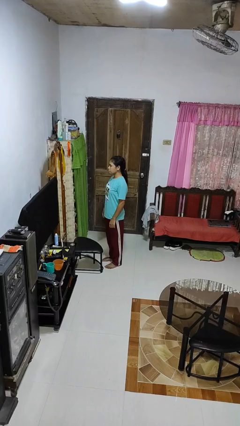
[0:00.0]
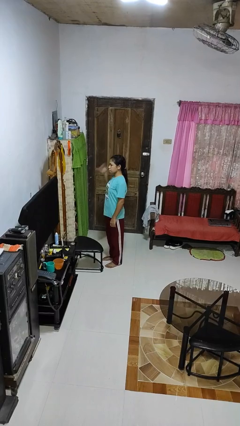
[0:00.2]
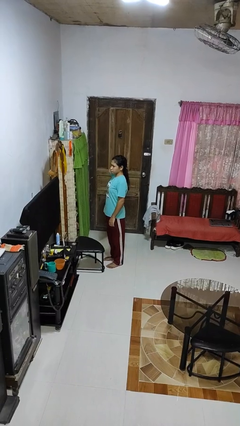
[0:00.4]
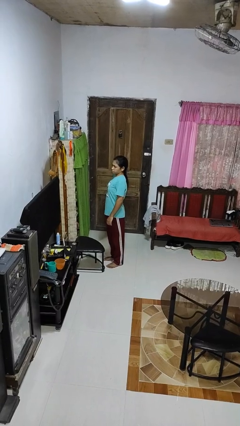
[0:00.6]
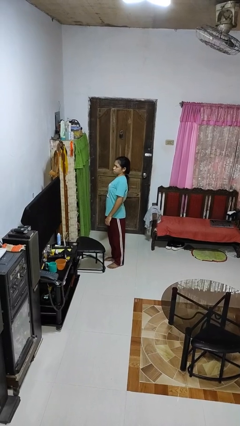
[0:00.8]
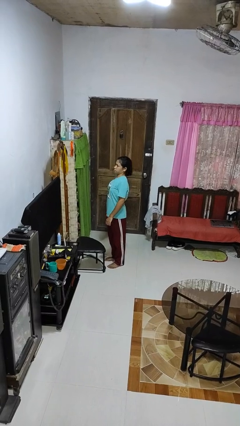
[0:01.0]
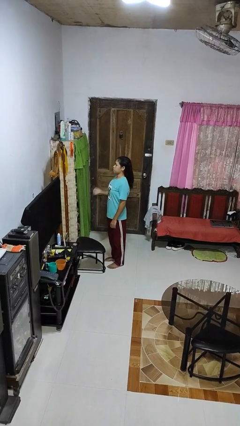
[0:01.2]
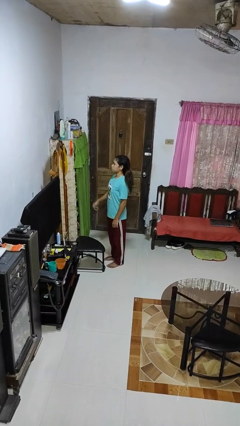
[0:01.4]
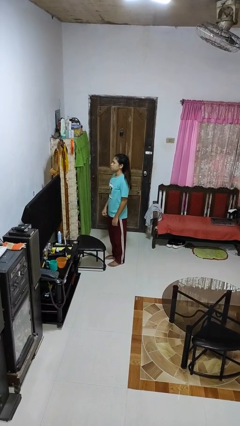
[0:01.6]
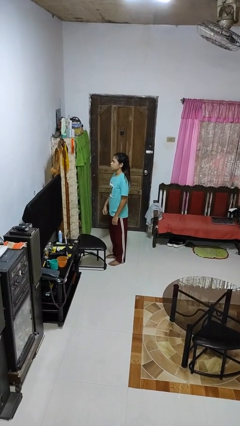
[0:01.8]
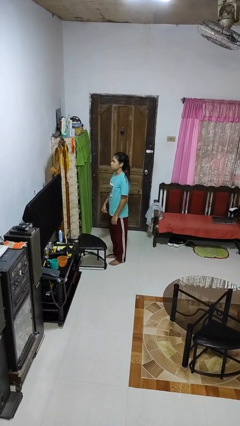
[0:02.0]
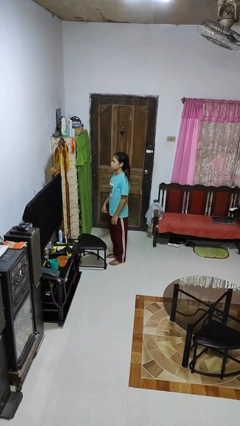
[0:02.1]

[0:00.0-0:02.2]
person takes off hairtie

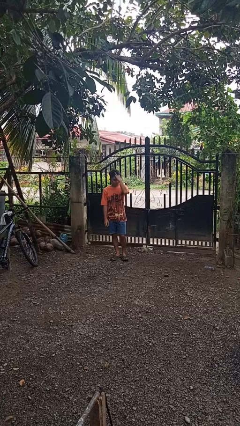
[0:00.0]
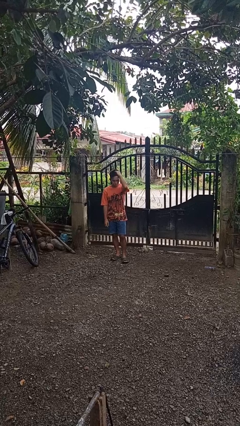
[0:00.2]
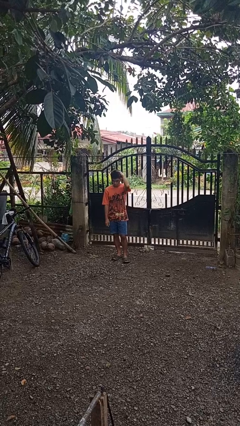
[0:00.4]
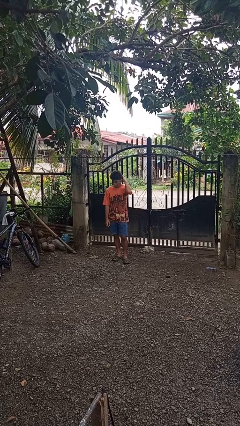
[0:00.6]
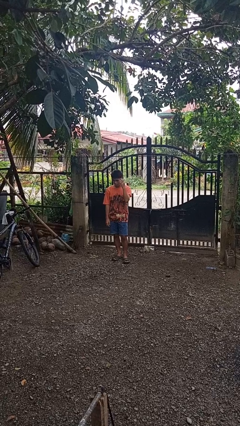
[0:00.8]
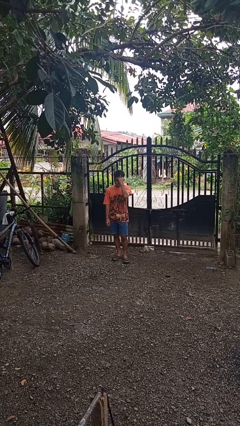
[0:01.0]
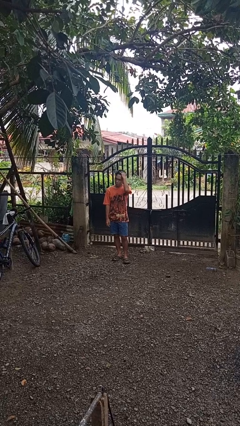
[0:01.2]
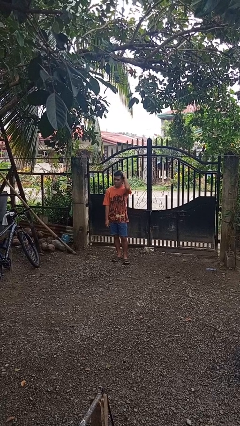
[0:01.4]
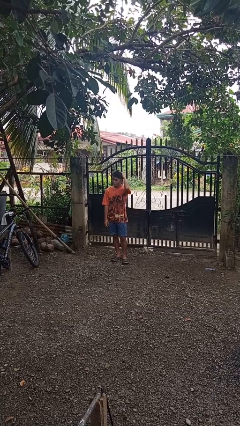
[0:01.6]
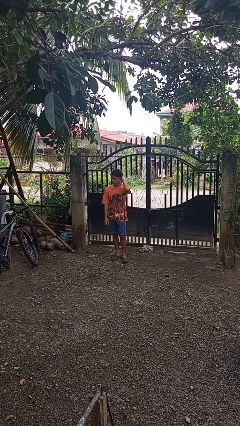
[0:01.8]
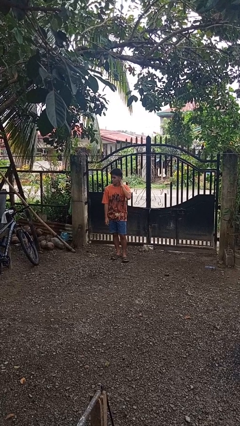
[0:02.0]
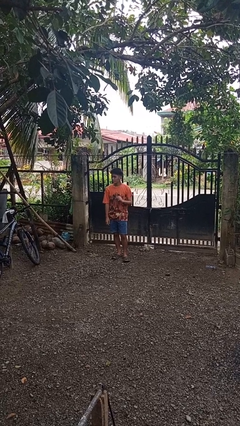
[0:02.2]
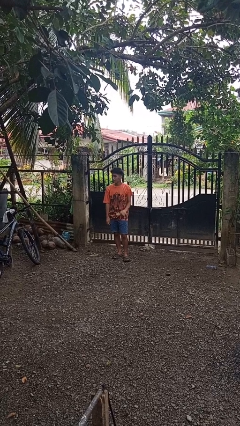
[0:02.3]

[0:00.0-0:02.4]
person strokes hair

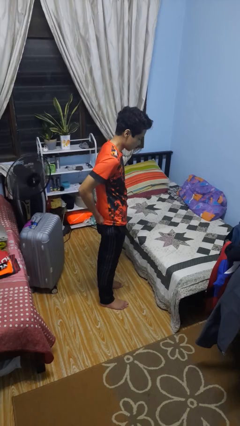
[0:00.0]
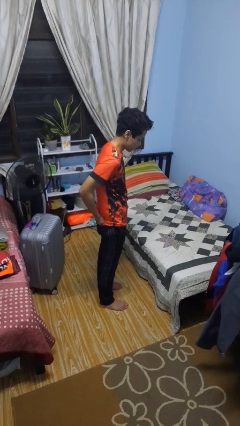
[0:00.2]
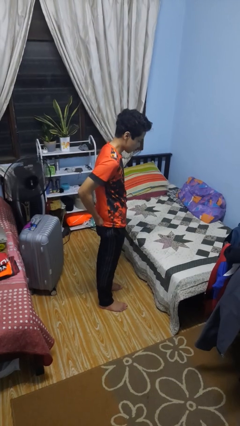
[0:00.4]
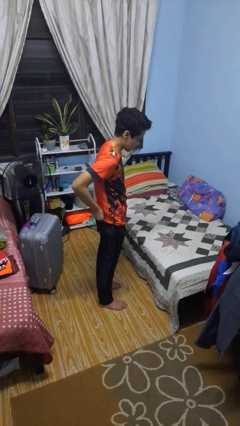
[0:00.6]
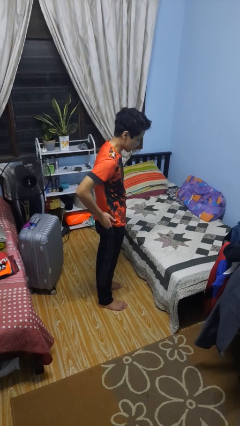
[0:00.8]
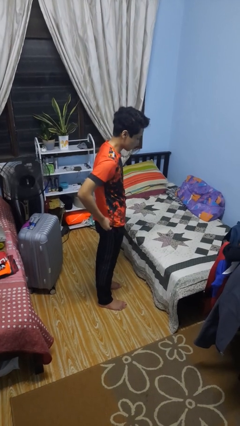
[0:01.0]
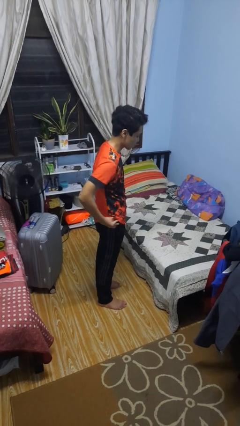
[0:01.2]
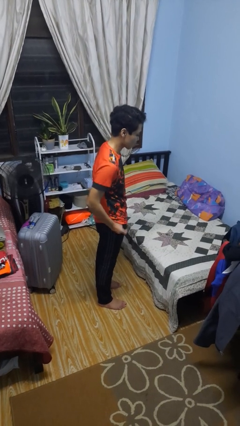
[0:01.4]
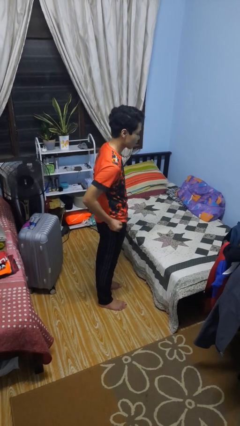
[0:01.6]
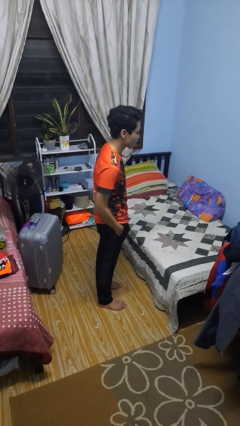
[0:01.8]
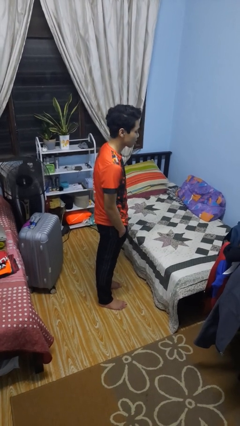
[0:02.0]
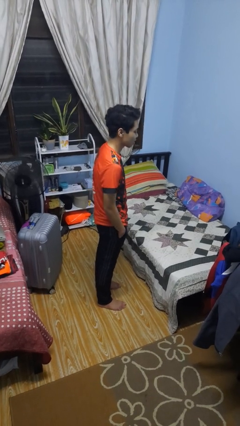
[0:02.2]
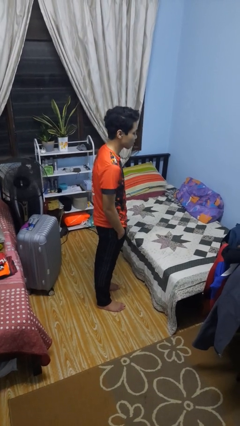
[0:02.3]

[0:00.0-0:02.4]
person puts hands in back pockets

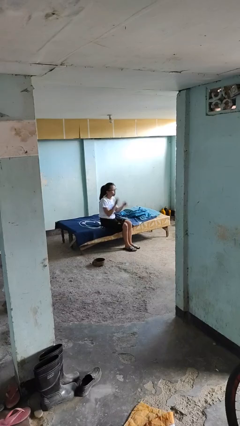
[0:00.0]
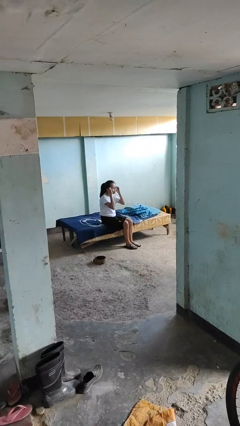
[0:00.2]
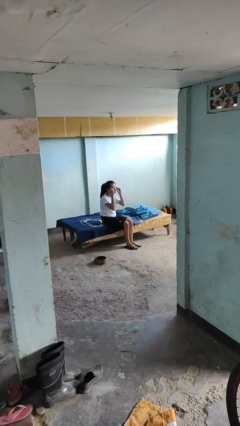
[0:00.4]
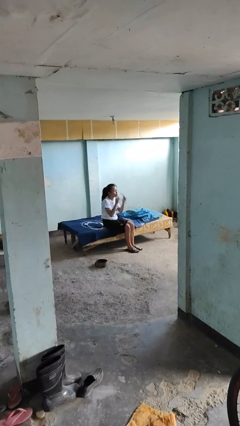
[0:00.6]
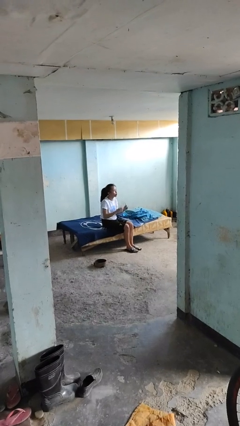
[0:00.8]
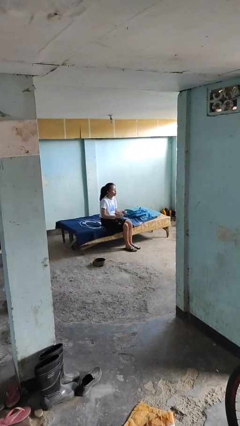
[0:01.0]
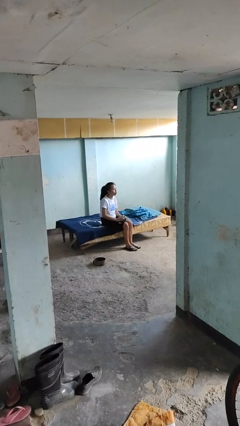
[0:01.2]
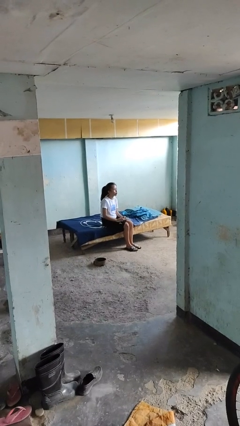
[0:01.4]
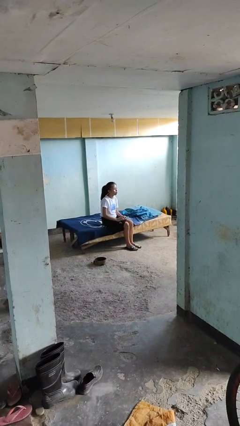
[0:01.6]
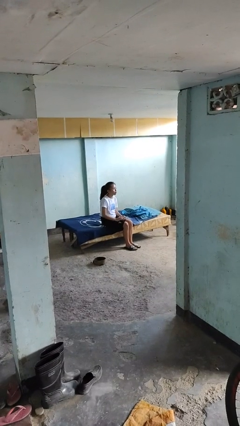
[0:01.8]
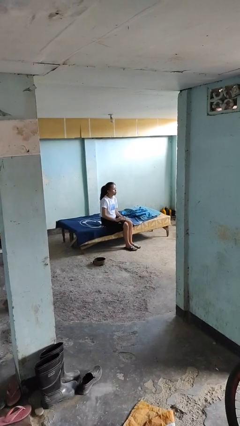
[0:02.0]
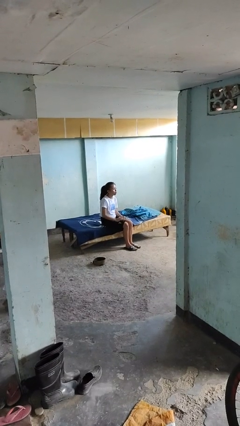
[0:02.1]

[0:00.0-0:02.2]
person takes off glasses

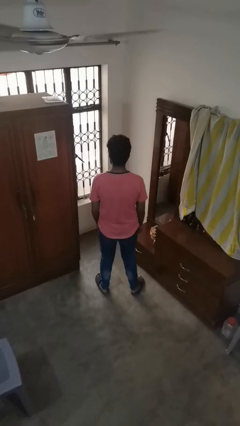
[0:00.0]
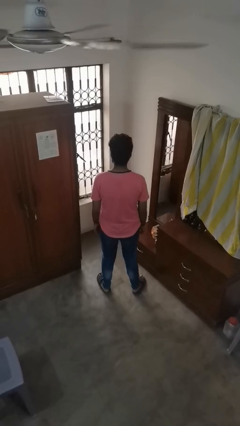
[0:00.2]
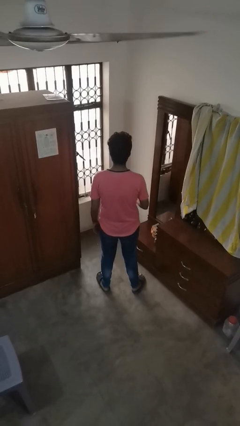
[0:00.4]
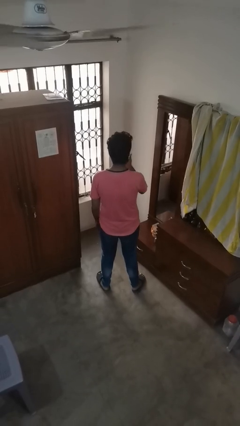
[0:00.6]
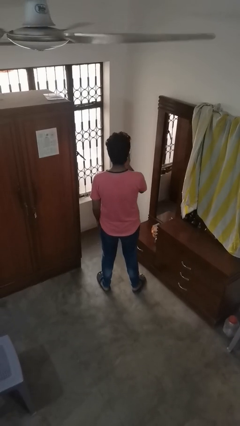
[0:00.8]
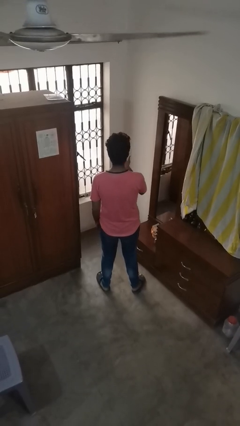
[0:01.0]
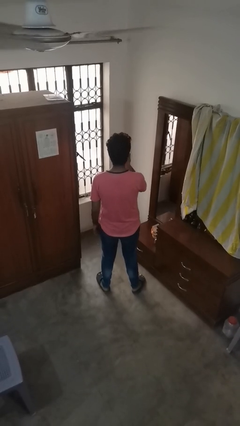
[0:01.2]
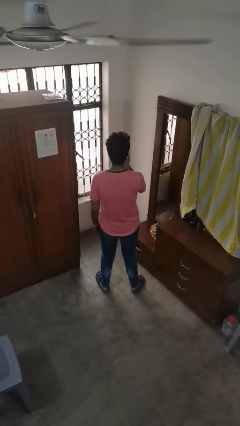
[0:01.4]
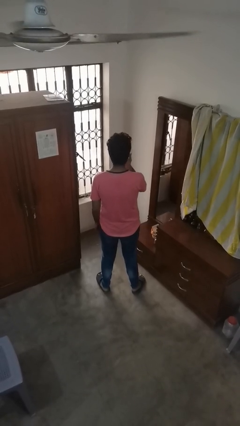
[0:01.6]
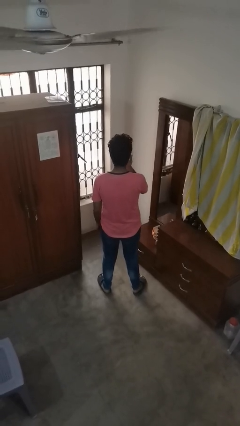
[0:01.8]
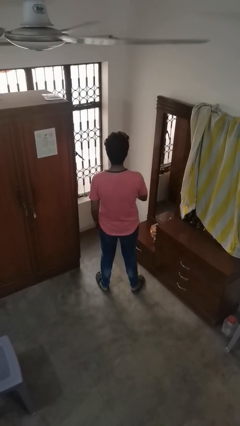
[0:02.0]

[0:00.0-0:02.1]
person licks fingers

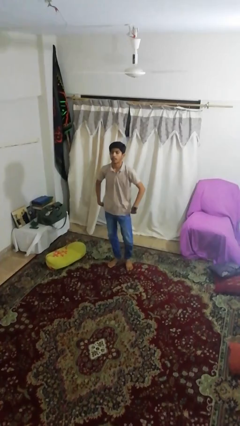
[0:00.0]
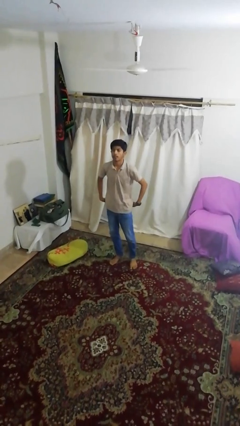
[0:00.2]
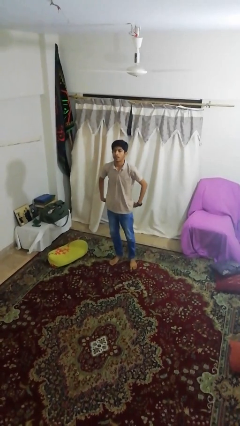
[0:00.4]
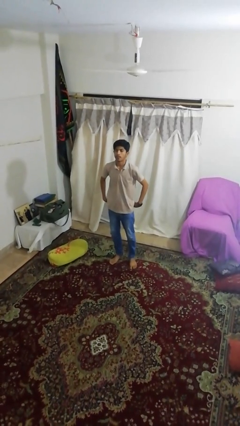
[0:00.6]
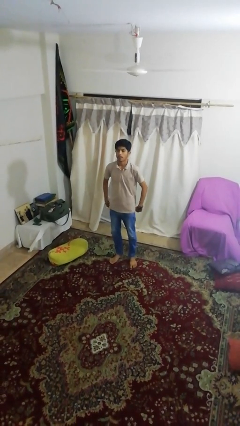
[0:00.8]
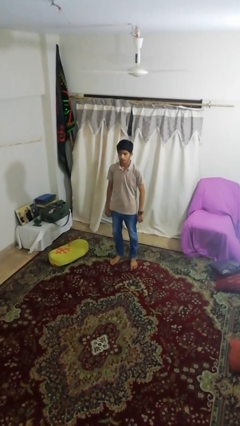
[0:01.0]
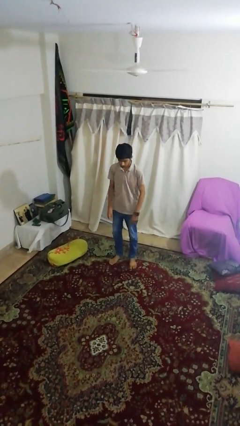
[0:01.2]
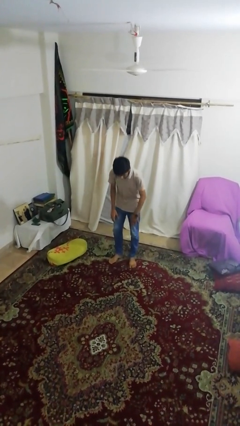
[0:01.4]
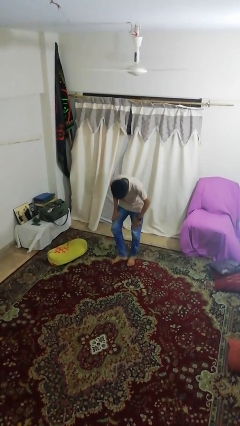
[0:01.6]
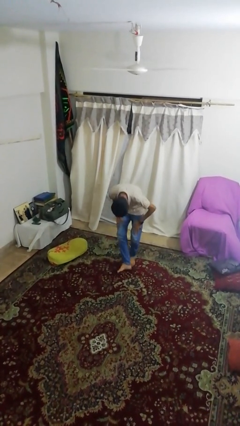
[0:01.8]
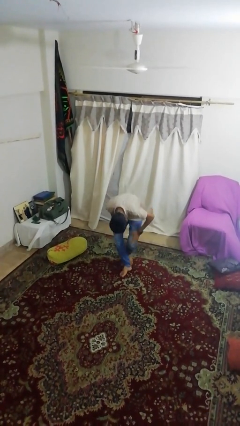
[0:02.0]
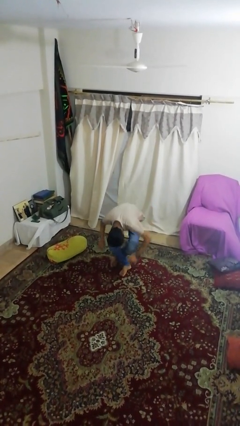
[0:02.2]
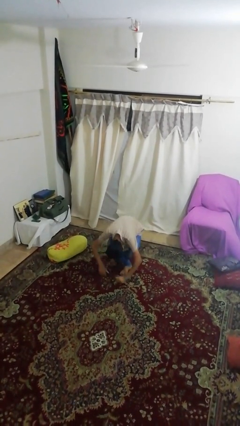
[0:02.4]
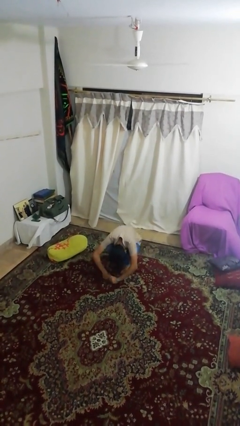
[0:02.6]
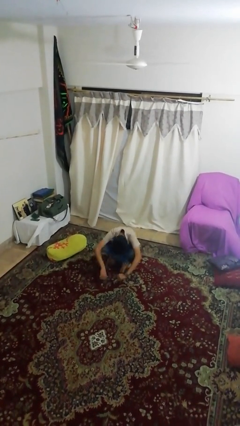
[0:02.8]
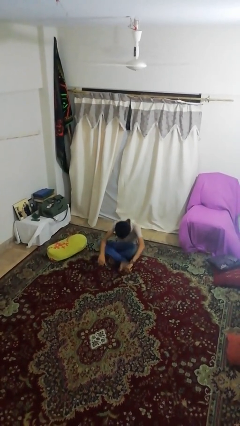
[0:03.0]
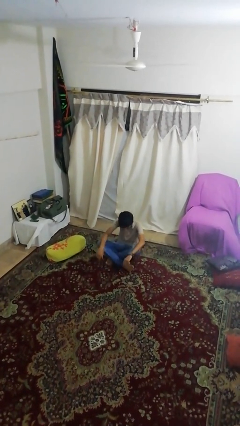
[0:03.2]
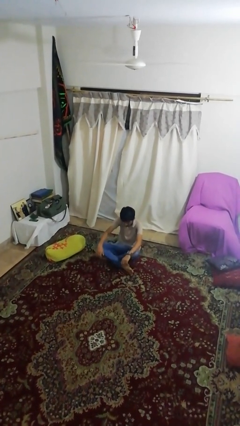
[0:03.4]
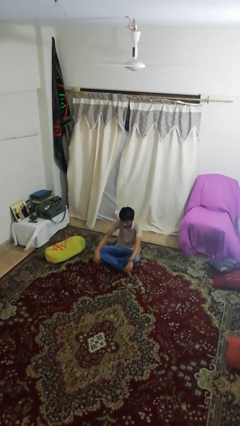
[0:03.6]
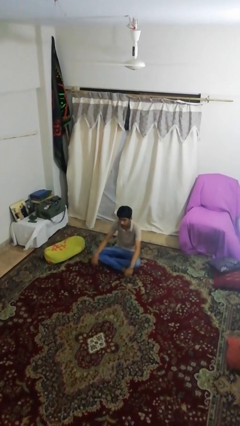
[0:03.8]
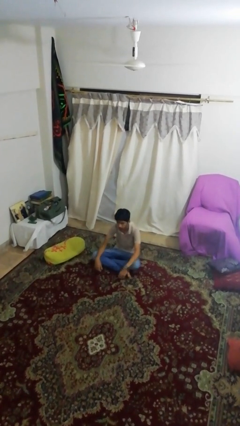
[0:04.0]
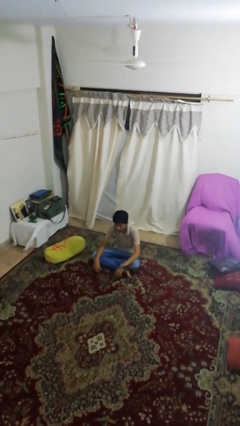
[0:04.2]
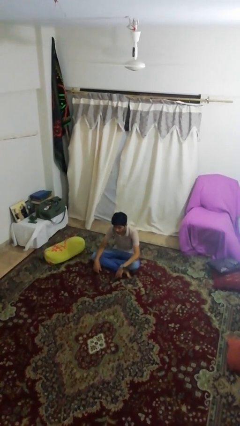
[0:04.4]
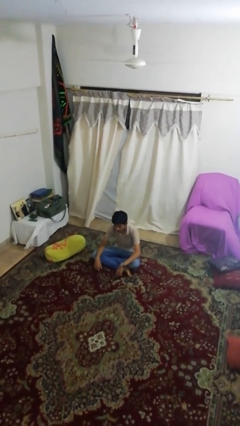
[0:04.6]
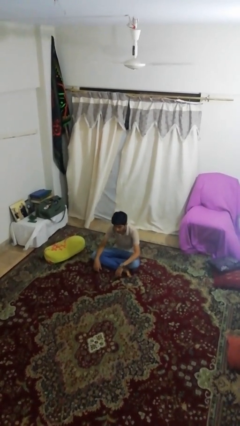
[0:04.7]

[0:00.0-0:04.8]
person sits crisscross

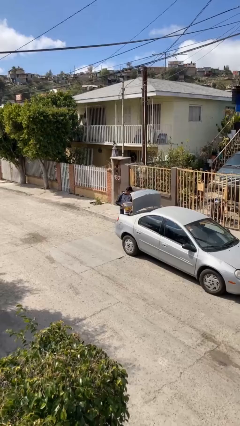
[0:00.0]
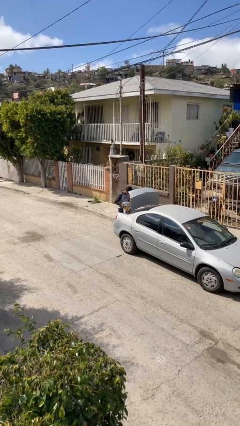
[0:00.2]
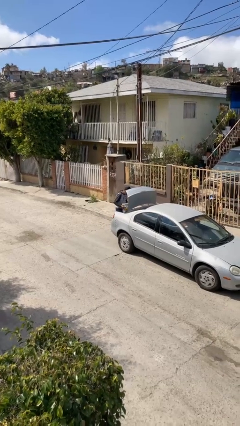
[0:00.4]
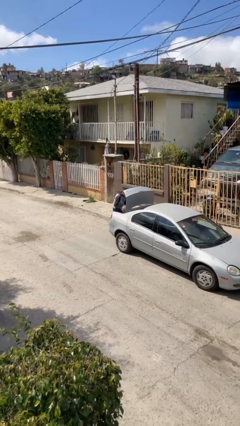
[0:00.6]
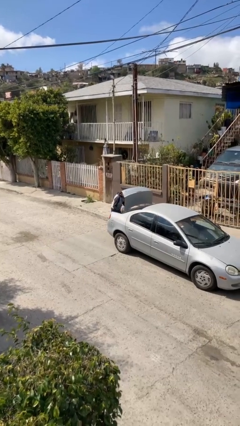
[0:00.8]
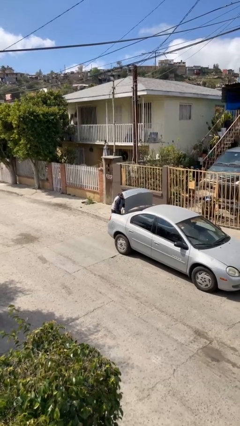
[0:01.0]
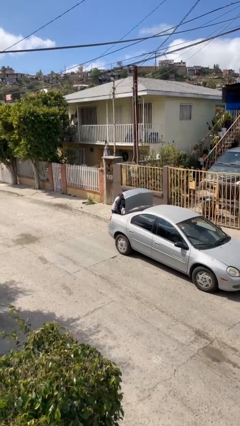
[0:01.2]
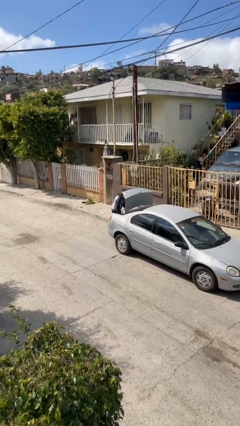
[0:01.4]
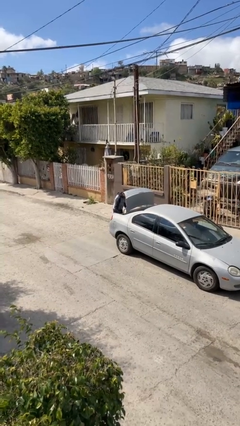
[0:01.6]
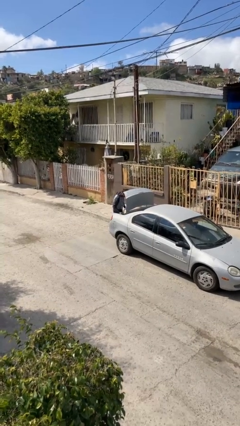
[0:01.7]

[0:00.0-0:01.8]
person loads car
